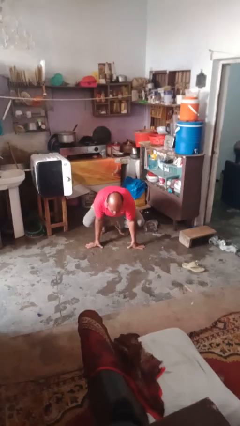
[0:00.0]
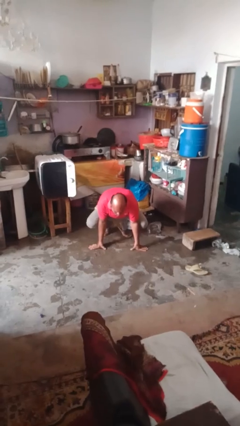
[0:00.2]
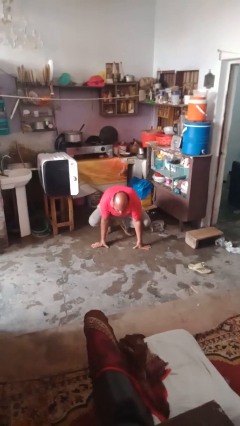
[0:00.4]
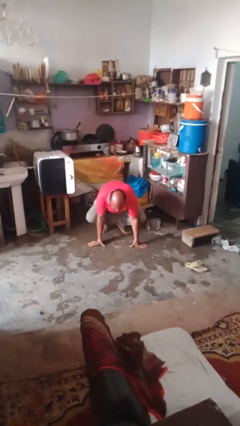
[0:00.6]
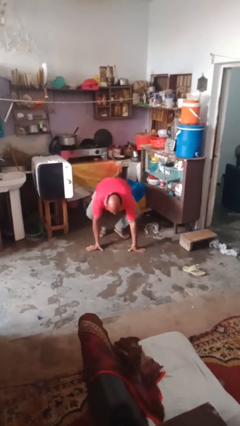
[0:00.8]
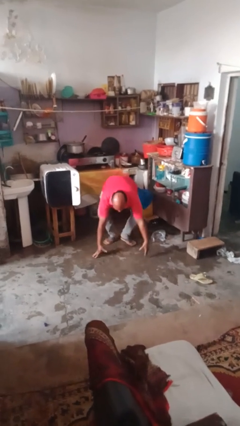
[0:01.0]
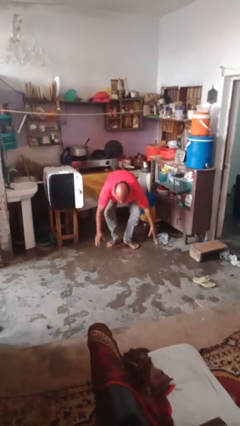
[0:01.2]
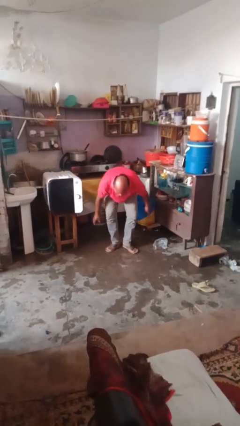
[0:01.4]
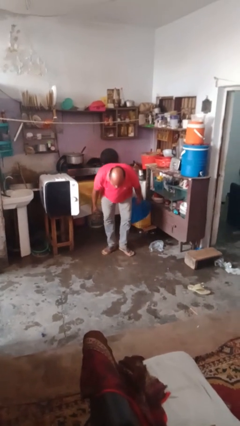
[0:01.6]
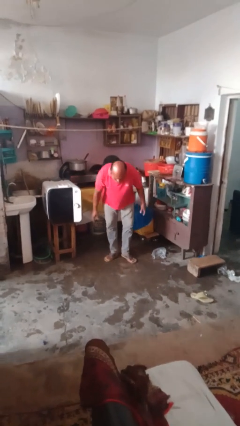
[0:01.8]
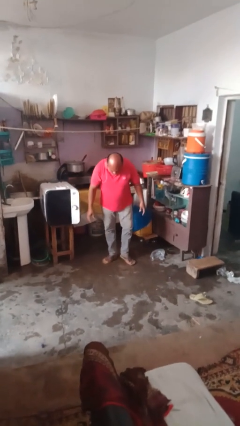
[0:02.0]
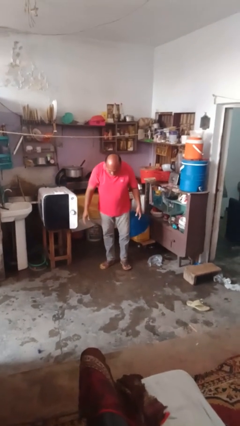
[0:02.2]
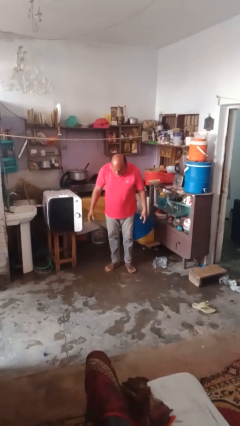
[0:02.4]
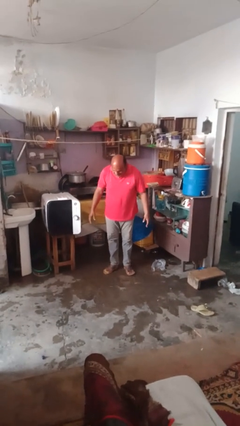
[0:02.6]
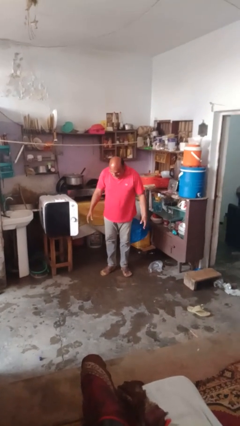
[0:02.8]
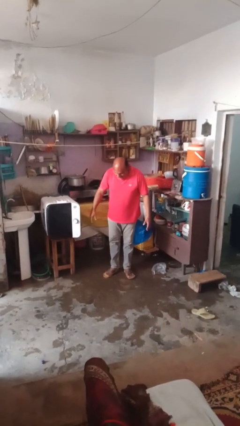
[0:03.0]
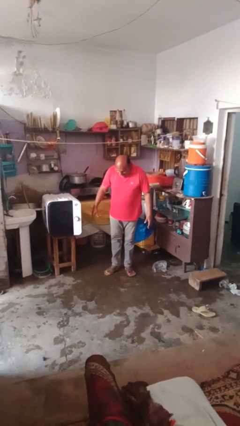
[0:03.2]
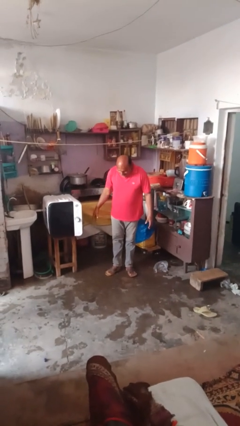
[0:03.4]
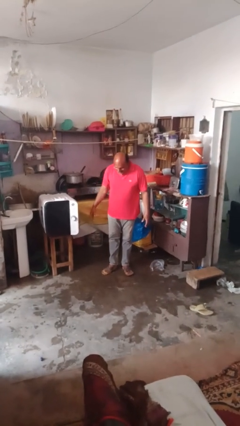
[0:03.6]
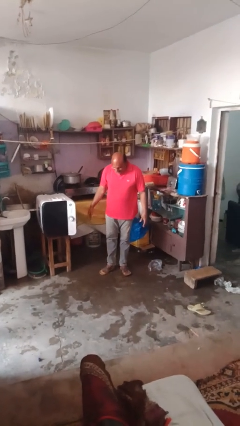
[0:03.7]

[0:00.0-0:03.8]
person stands up from floor

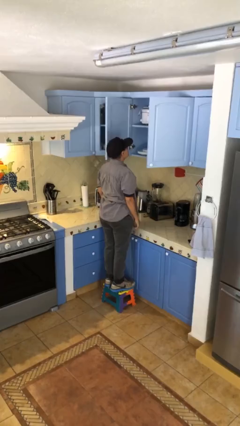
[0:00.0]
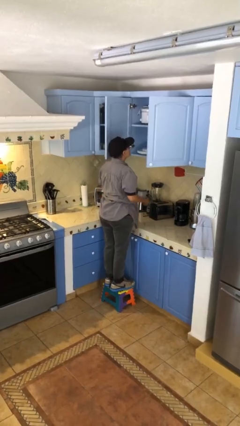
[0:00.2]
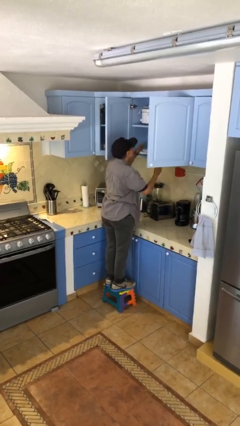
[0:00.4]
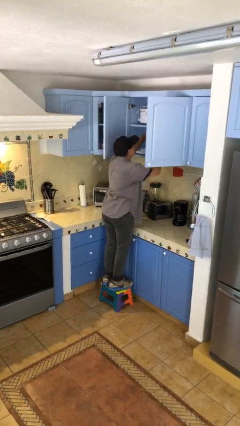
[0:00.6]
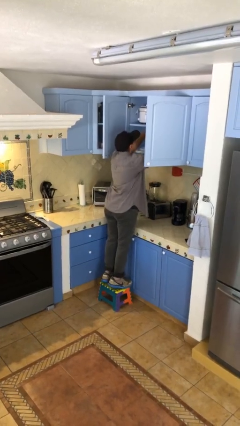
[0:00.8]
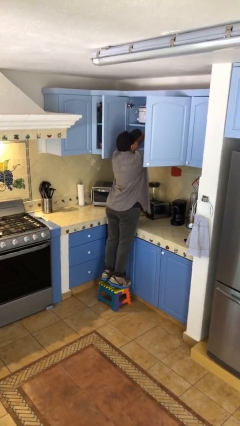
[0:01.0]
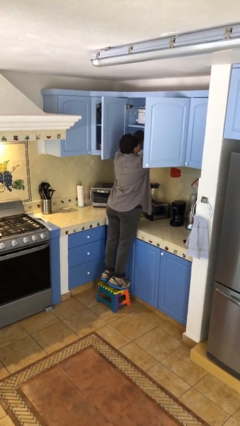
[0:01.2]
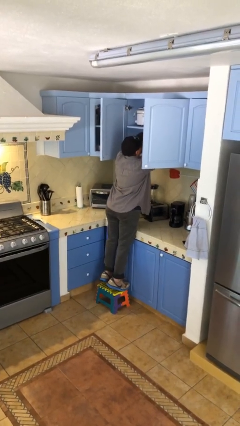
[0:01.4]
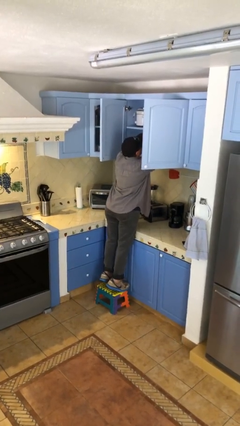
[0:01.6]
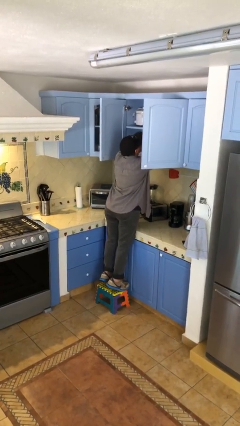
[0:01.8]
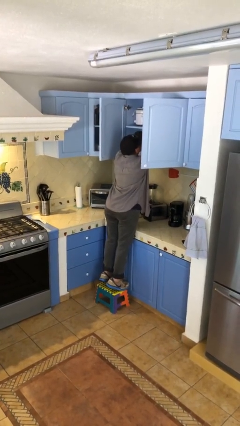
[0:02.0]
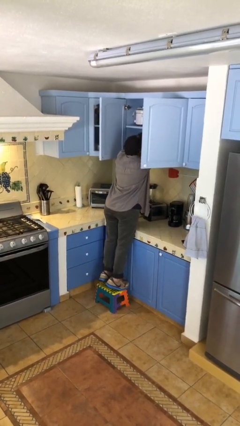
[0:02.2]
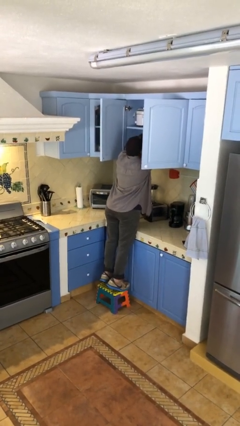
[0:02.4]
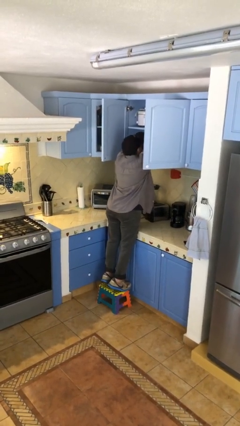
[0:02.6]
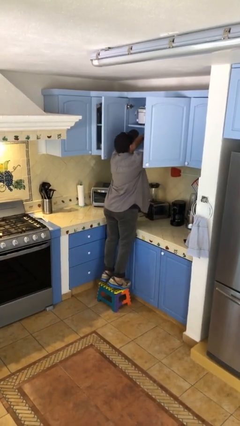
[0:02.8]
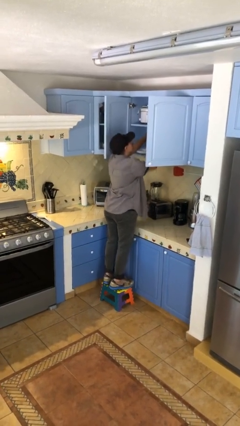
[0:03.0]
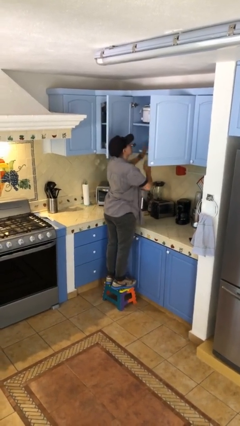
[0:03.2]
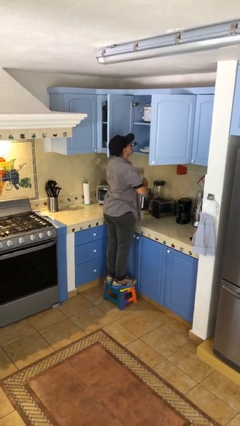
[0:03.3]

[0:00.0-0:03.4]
person searches in cabinet

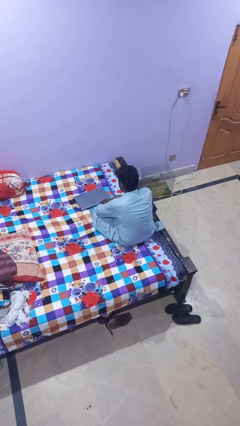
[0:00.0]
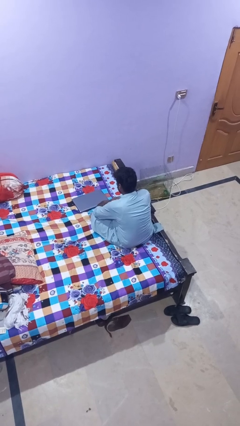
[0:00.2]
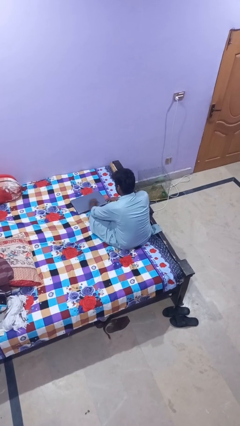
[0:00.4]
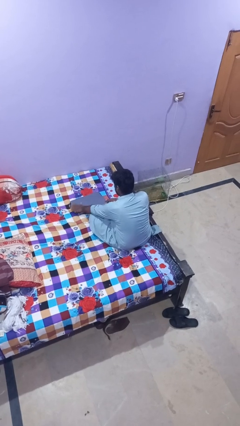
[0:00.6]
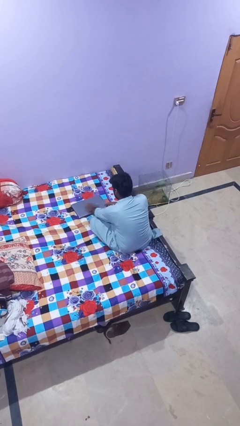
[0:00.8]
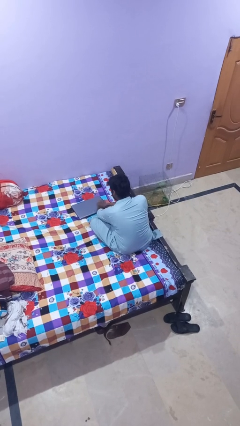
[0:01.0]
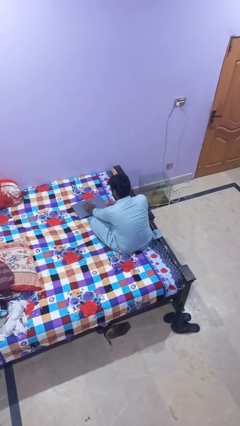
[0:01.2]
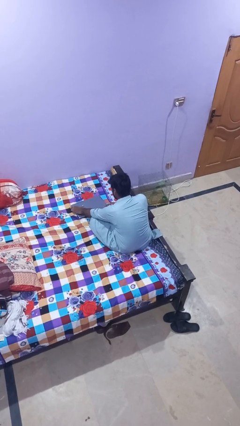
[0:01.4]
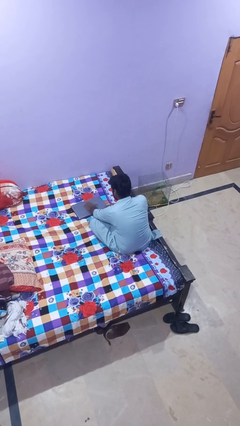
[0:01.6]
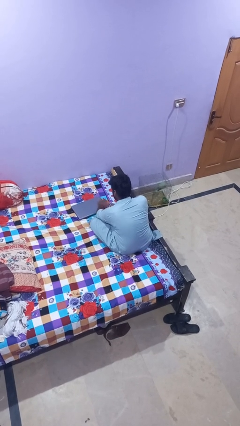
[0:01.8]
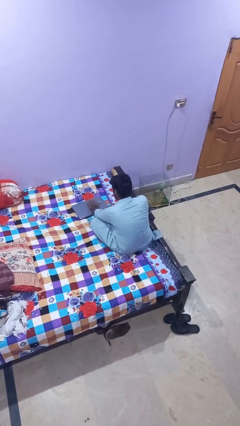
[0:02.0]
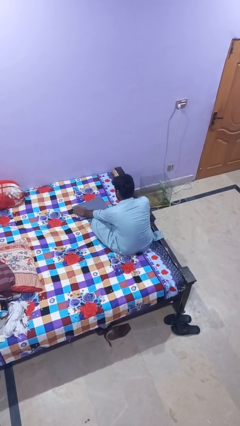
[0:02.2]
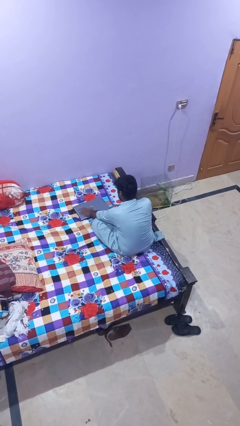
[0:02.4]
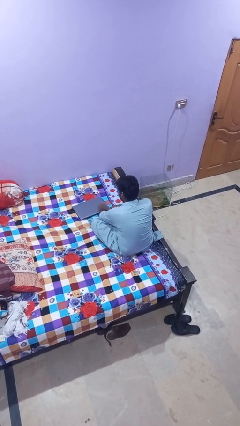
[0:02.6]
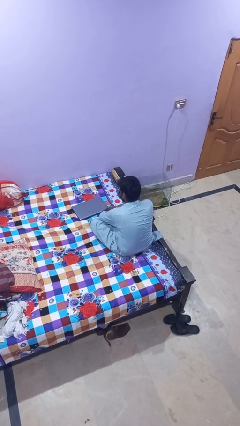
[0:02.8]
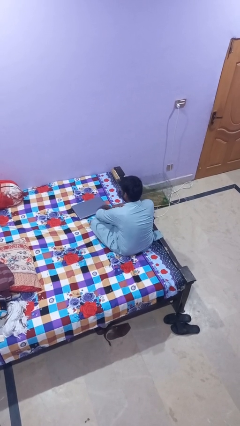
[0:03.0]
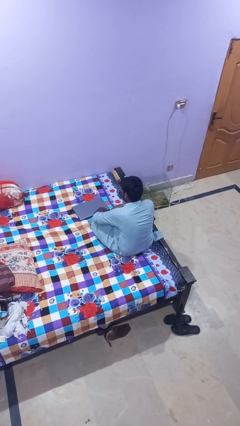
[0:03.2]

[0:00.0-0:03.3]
person waves hand over object

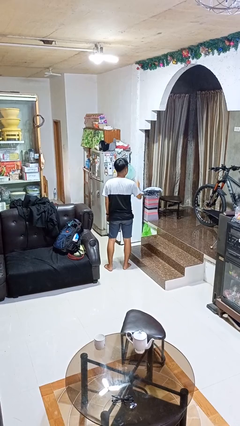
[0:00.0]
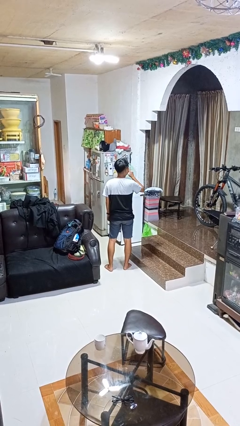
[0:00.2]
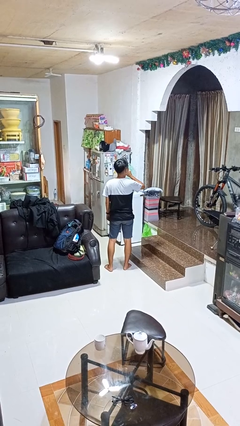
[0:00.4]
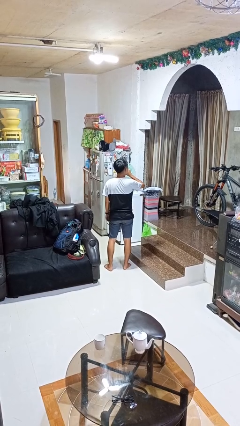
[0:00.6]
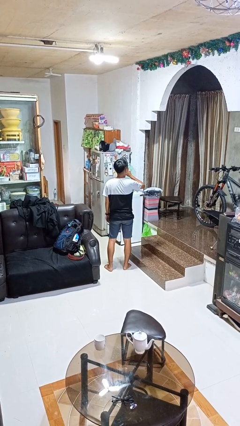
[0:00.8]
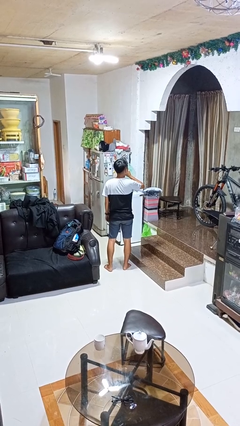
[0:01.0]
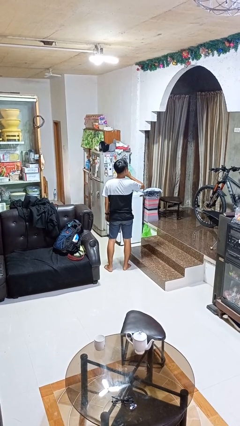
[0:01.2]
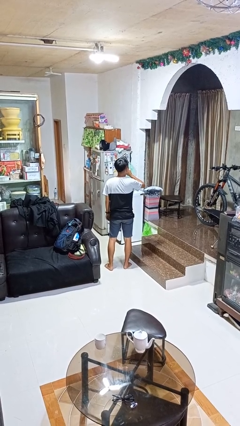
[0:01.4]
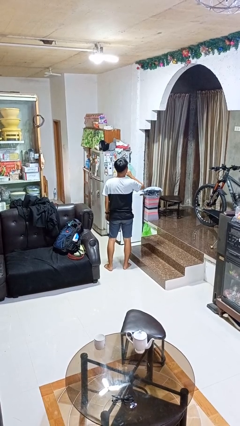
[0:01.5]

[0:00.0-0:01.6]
person gestures be quiet

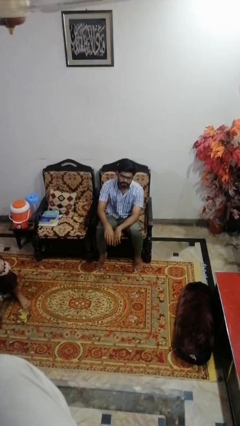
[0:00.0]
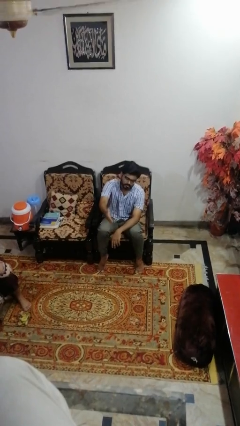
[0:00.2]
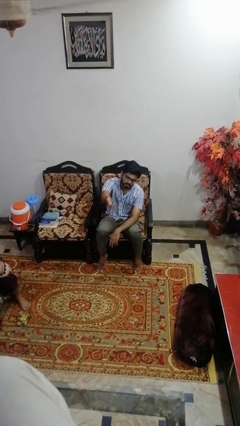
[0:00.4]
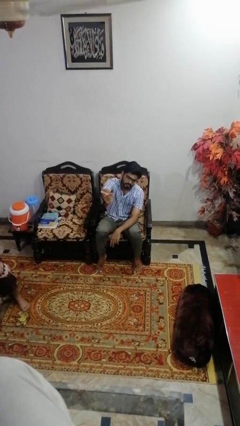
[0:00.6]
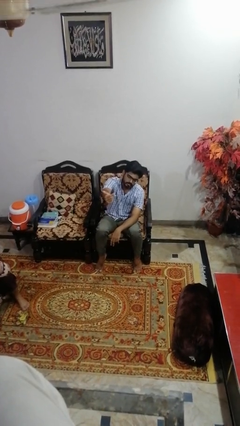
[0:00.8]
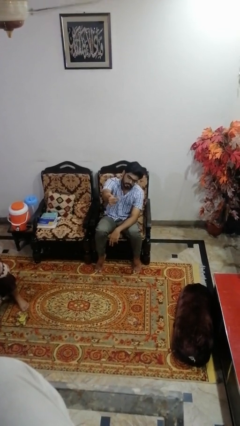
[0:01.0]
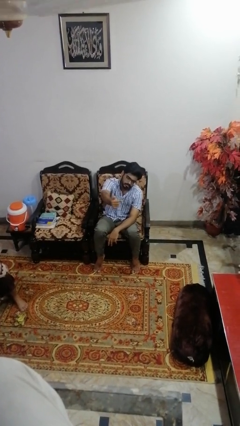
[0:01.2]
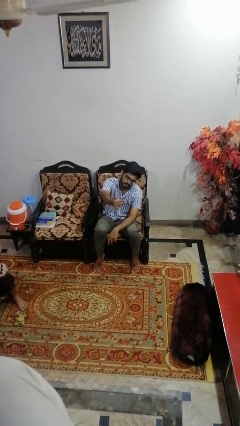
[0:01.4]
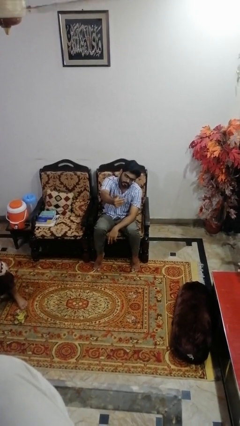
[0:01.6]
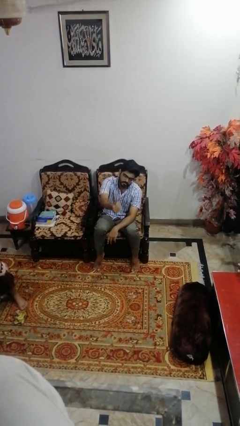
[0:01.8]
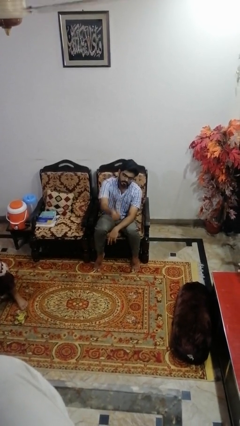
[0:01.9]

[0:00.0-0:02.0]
person gestures come here

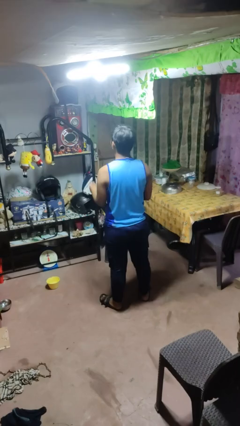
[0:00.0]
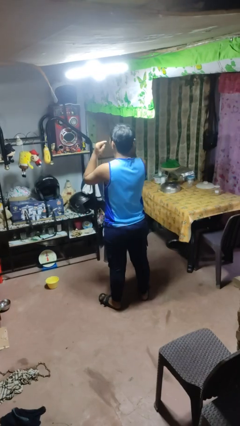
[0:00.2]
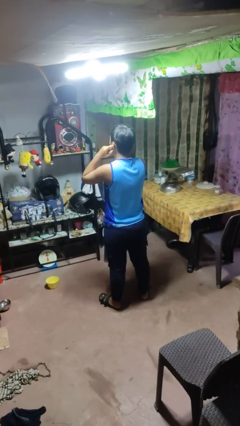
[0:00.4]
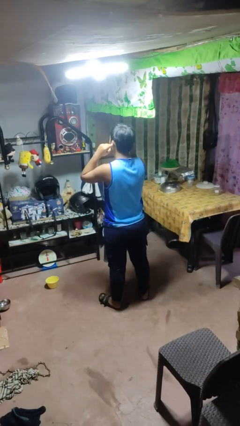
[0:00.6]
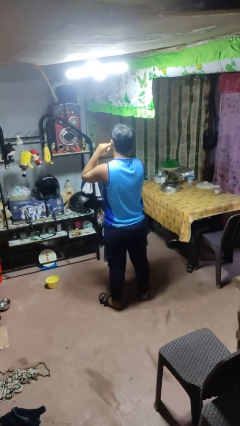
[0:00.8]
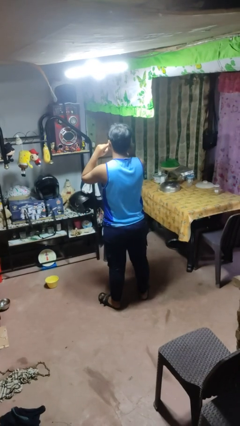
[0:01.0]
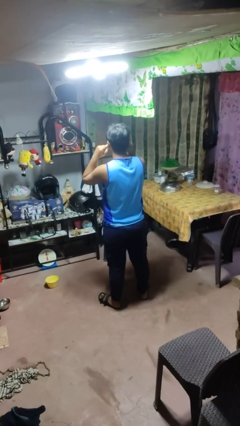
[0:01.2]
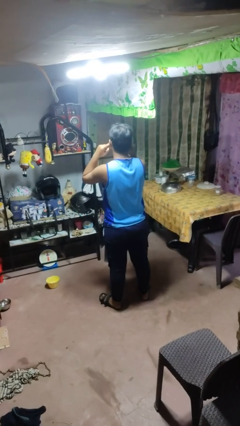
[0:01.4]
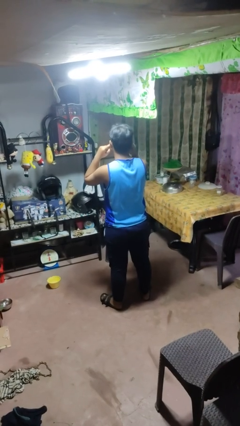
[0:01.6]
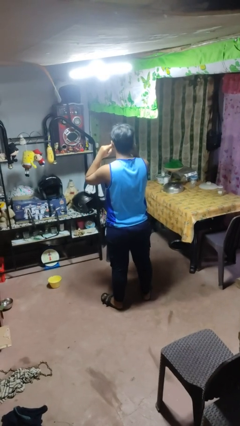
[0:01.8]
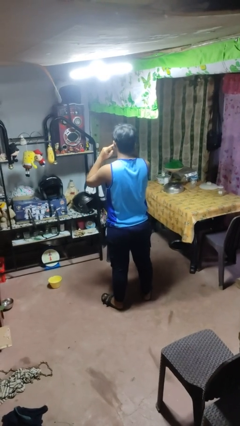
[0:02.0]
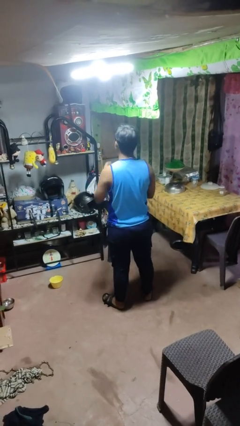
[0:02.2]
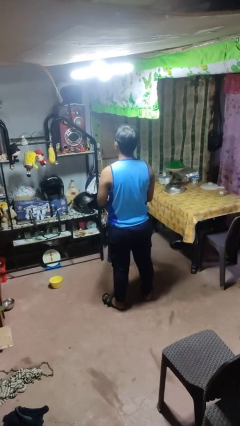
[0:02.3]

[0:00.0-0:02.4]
person puts fingers in ear

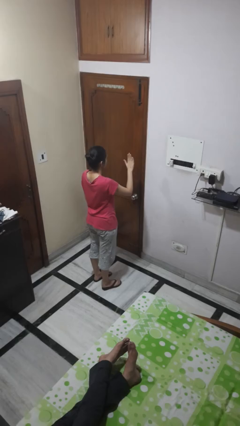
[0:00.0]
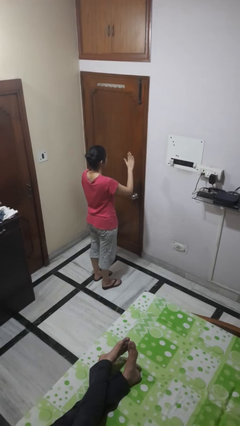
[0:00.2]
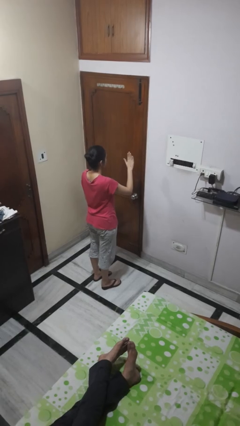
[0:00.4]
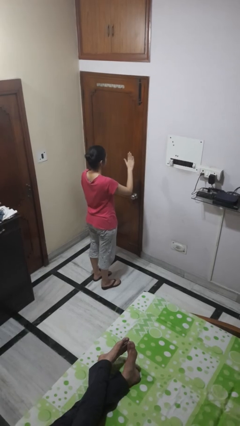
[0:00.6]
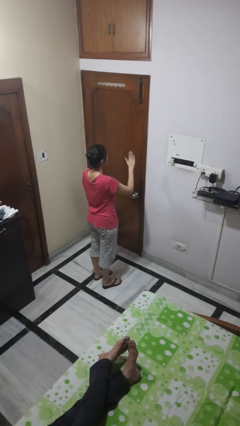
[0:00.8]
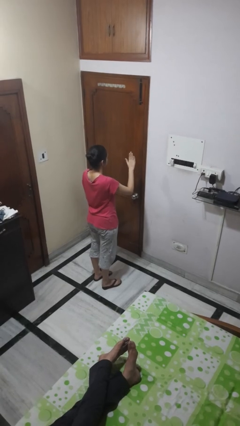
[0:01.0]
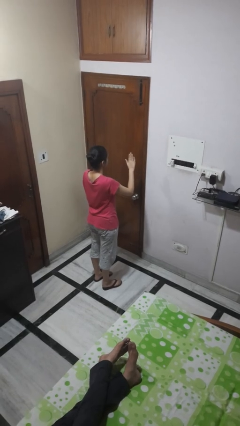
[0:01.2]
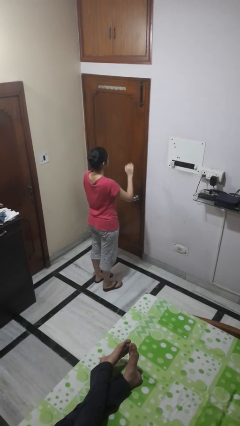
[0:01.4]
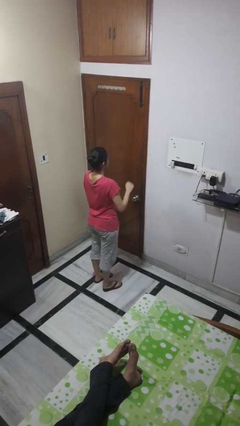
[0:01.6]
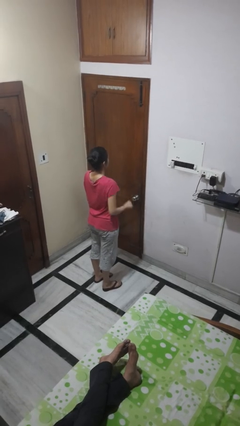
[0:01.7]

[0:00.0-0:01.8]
person gestures stop
